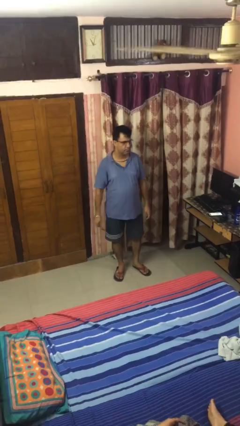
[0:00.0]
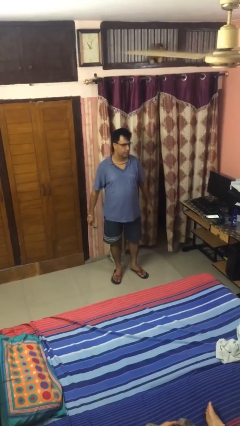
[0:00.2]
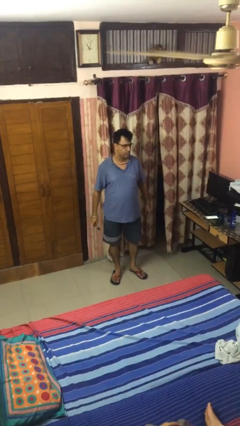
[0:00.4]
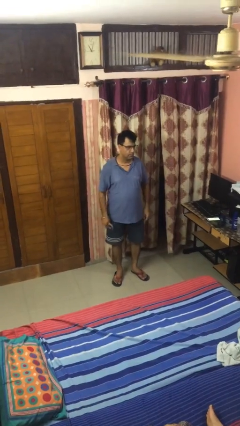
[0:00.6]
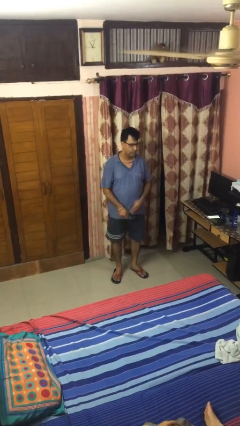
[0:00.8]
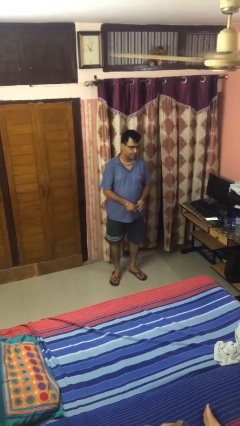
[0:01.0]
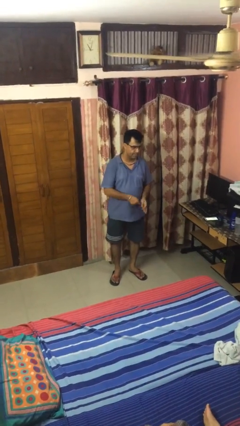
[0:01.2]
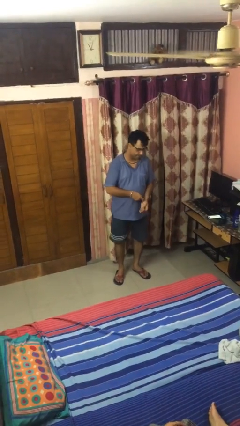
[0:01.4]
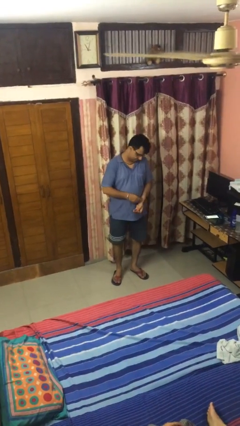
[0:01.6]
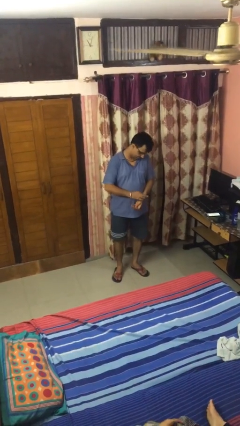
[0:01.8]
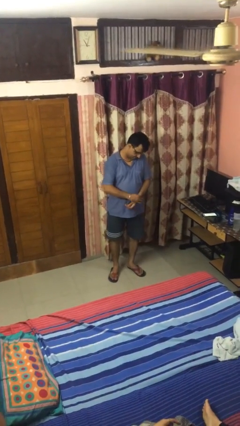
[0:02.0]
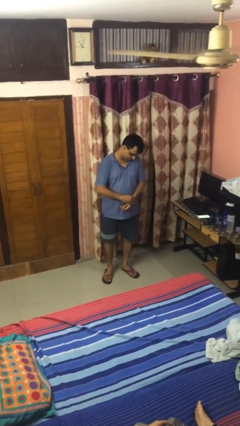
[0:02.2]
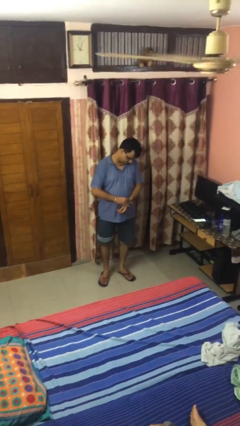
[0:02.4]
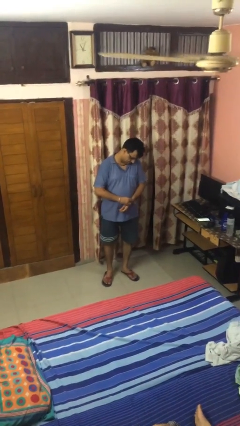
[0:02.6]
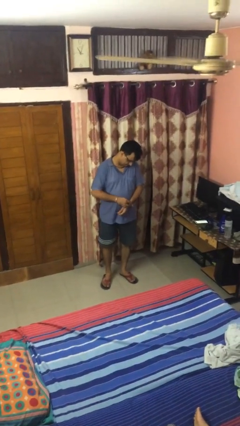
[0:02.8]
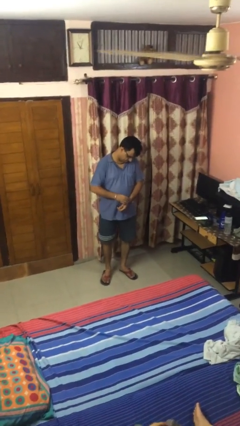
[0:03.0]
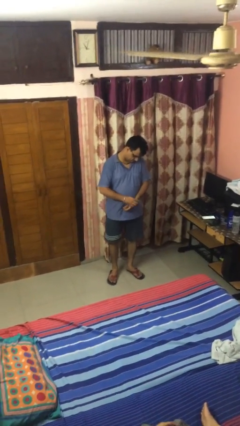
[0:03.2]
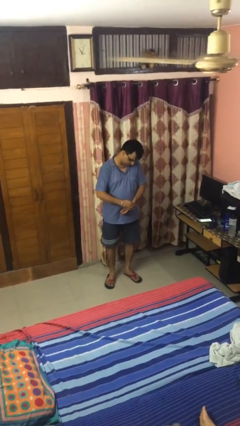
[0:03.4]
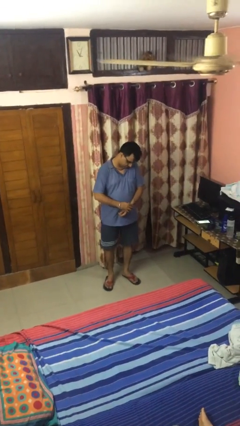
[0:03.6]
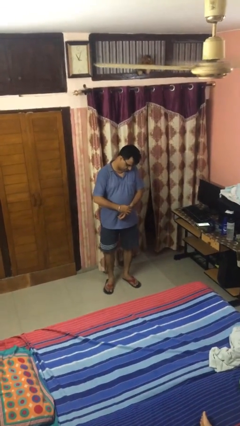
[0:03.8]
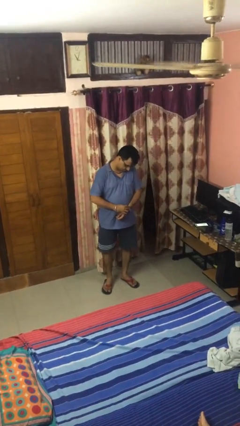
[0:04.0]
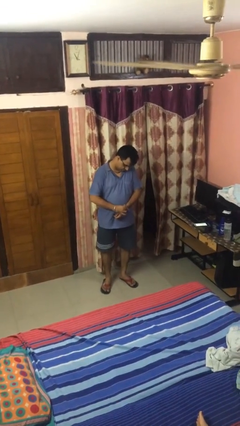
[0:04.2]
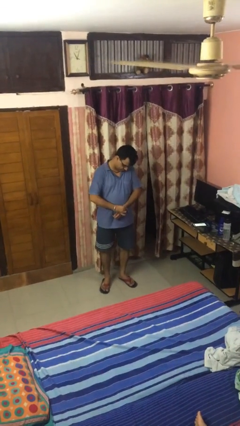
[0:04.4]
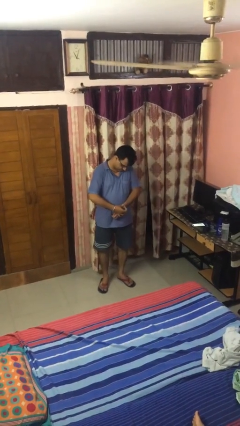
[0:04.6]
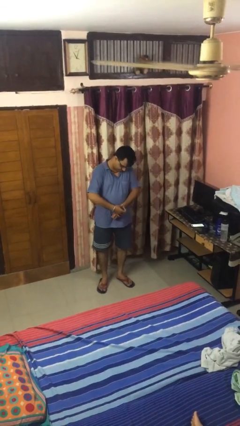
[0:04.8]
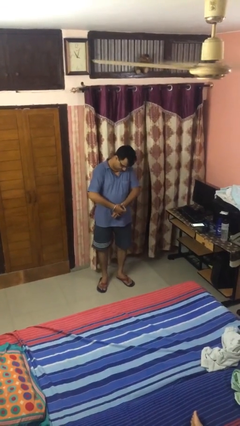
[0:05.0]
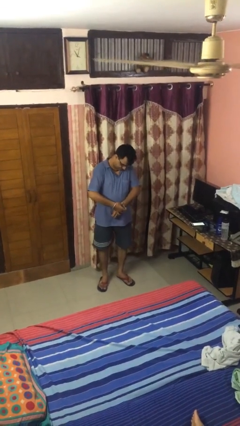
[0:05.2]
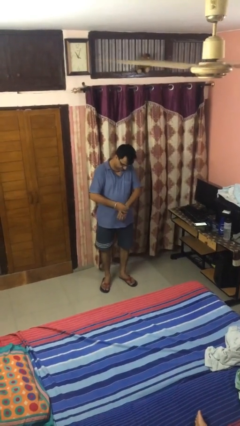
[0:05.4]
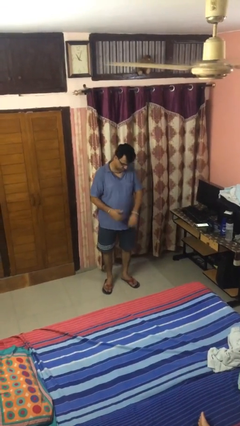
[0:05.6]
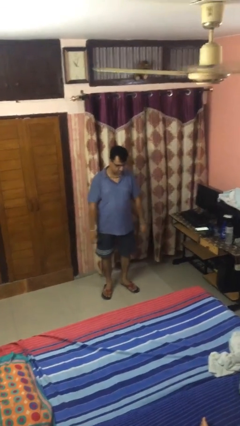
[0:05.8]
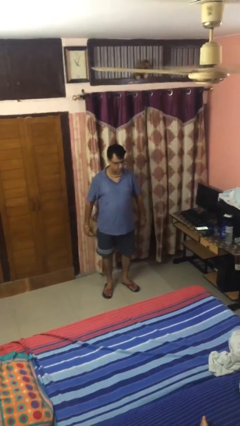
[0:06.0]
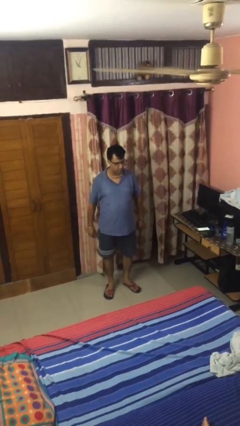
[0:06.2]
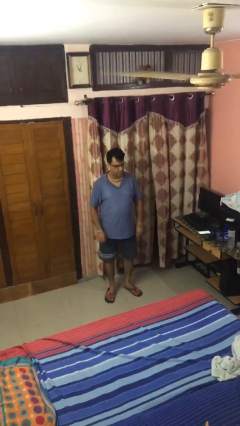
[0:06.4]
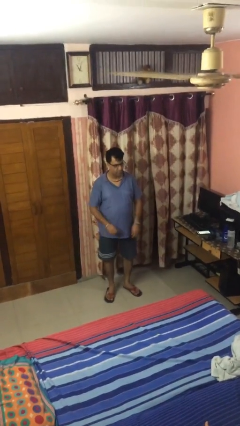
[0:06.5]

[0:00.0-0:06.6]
person puts on wristwatch

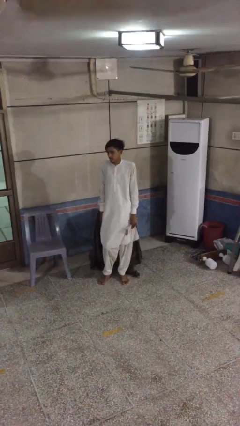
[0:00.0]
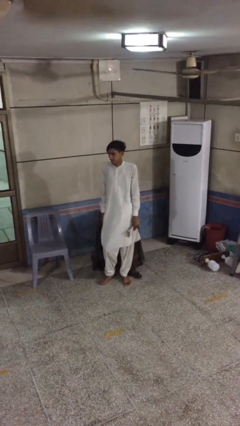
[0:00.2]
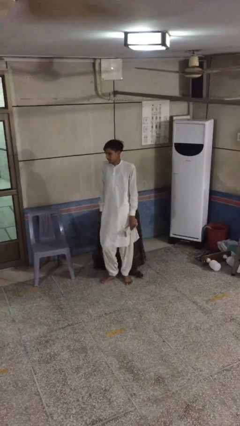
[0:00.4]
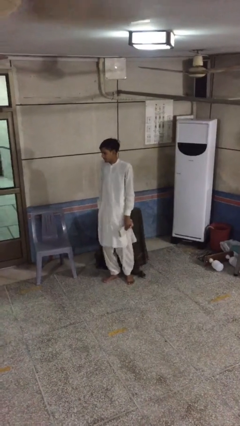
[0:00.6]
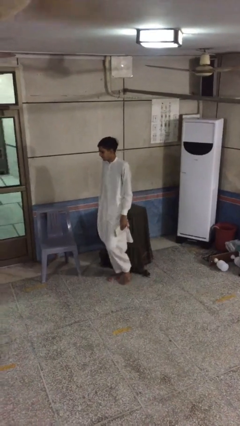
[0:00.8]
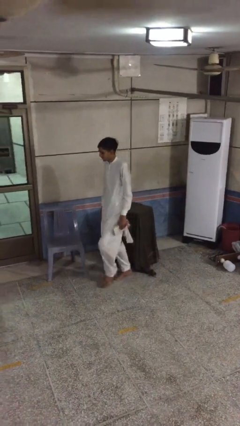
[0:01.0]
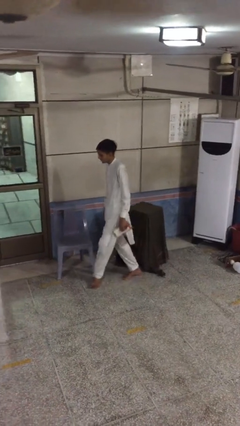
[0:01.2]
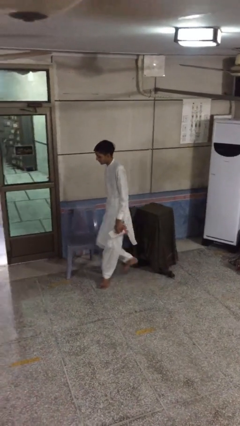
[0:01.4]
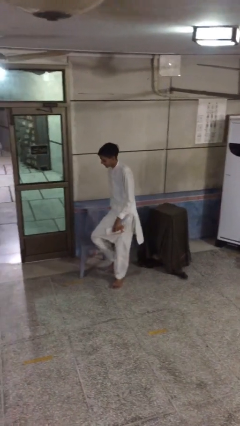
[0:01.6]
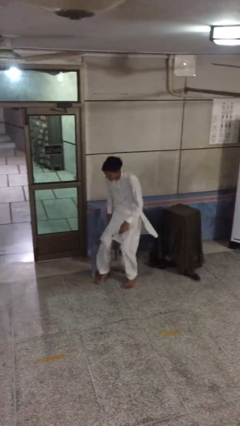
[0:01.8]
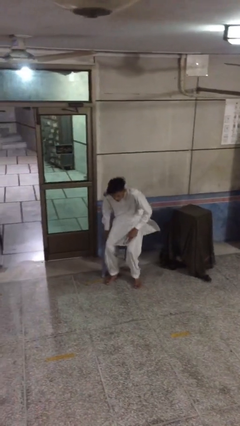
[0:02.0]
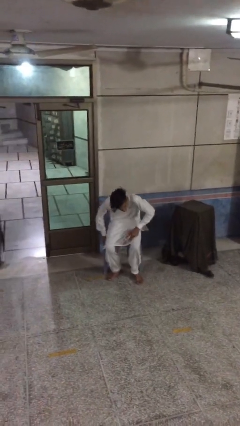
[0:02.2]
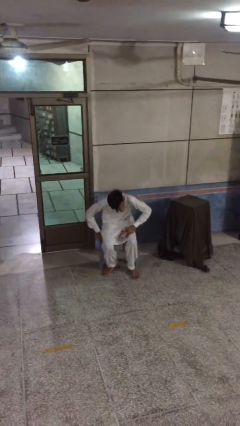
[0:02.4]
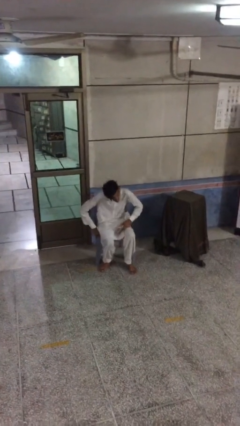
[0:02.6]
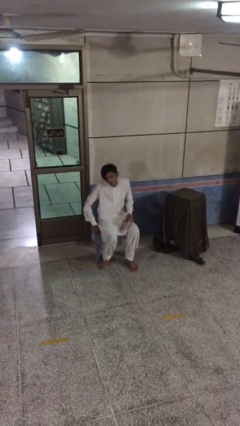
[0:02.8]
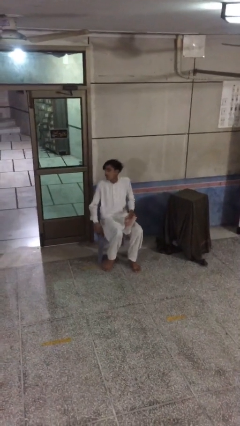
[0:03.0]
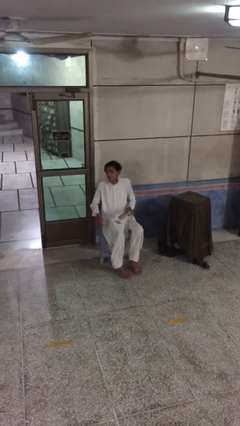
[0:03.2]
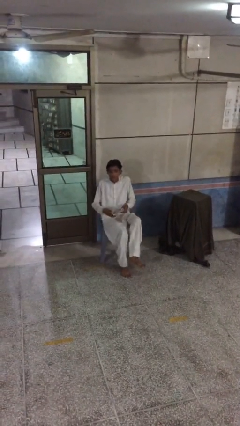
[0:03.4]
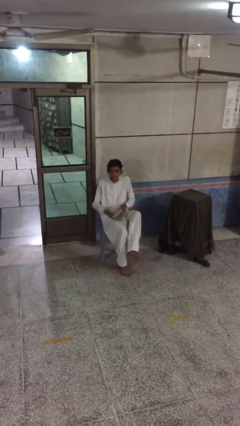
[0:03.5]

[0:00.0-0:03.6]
person sits down

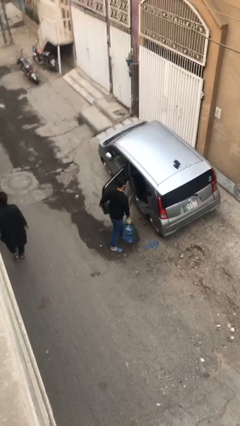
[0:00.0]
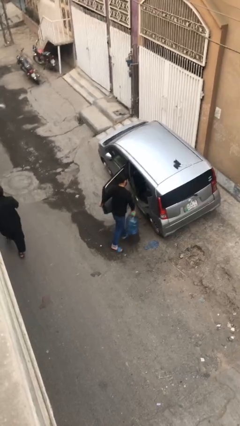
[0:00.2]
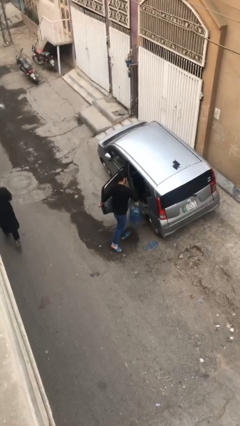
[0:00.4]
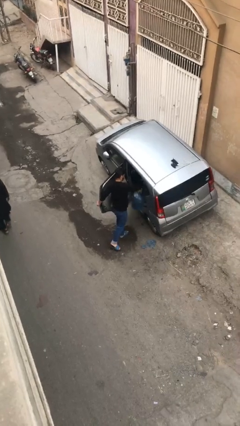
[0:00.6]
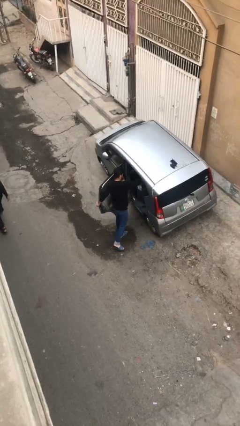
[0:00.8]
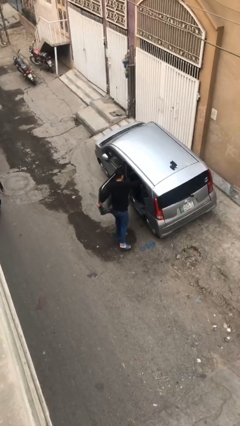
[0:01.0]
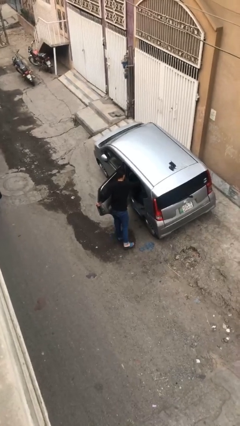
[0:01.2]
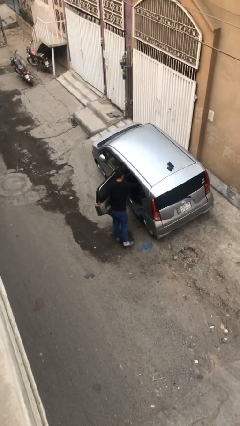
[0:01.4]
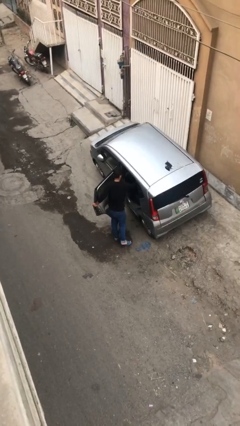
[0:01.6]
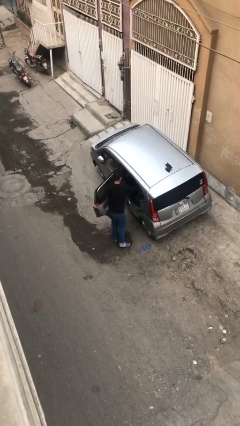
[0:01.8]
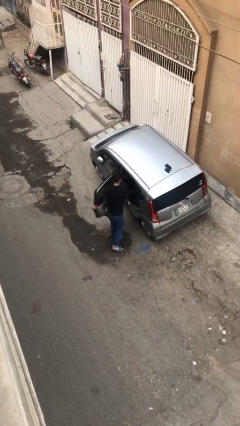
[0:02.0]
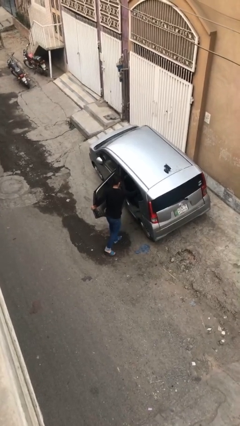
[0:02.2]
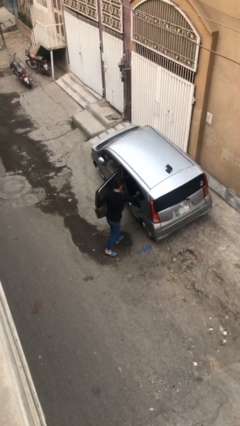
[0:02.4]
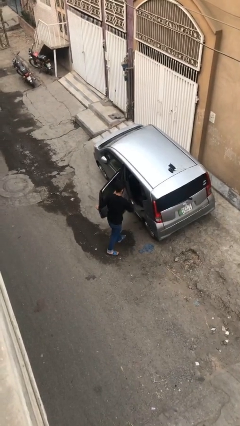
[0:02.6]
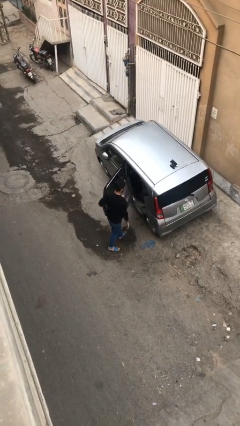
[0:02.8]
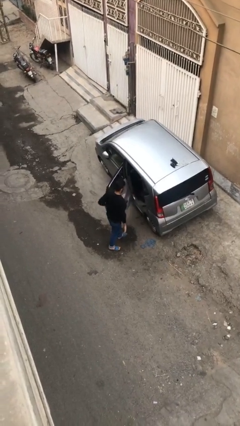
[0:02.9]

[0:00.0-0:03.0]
person loads car

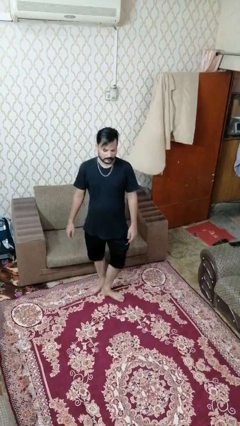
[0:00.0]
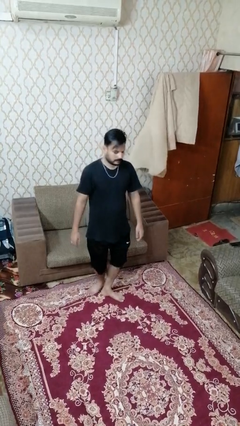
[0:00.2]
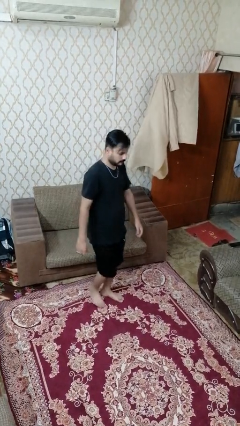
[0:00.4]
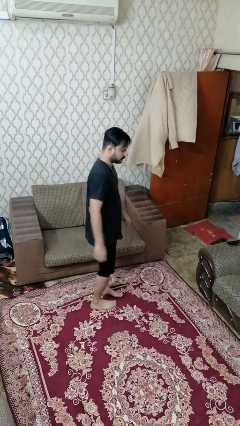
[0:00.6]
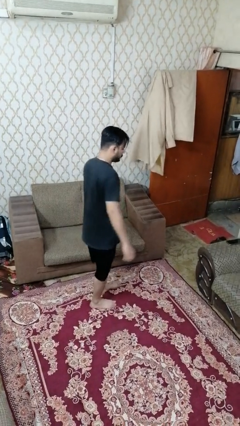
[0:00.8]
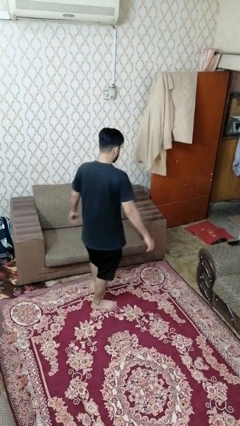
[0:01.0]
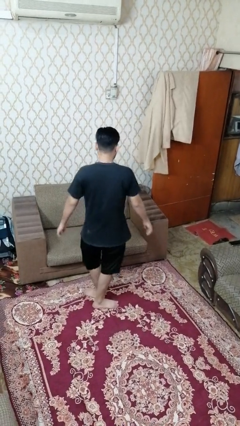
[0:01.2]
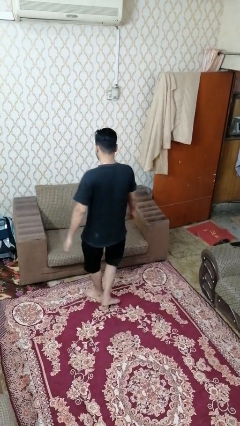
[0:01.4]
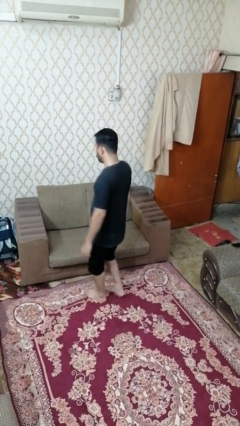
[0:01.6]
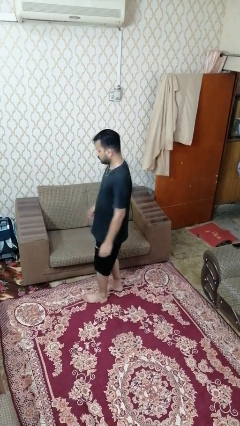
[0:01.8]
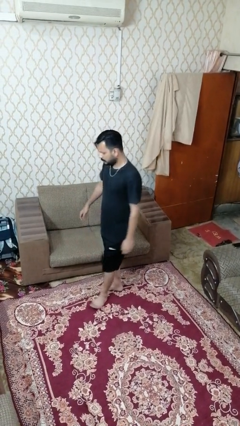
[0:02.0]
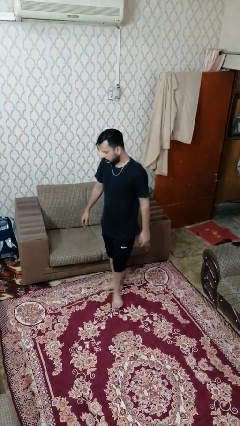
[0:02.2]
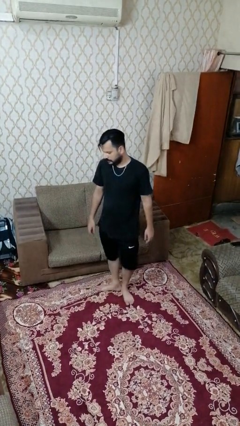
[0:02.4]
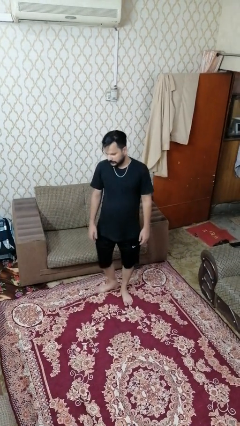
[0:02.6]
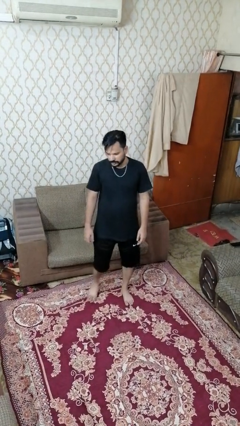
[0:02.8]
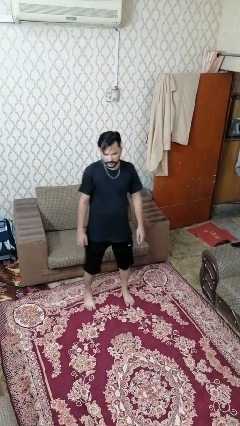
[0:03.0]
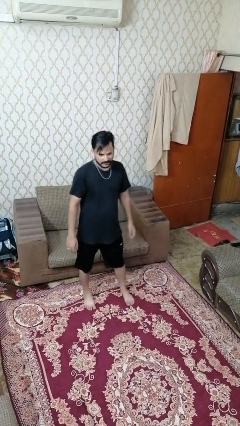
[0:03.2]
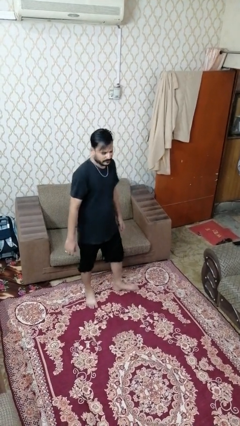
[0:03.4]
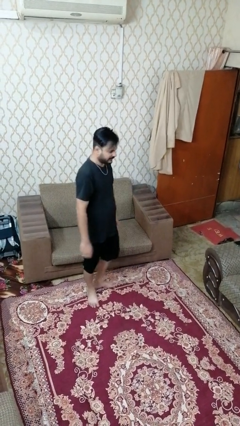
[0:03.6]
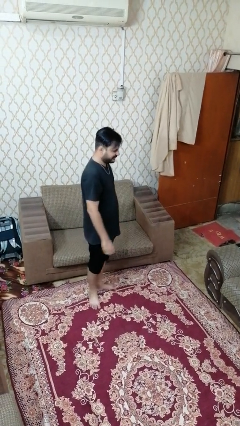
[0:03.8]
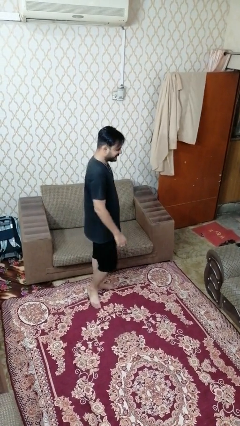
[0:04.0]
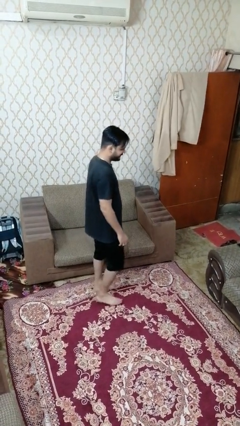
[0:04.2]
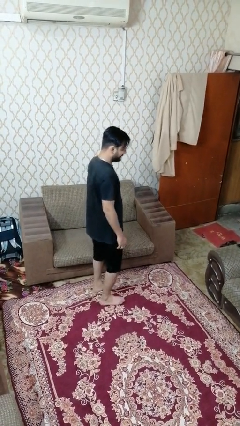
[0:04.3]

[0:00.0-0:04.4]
person twirls
